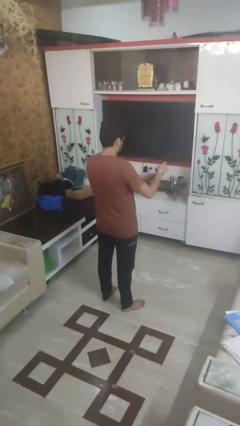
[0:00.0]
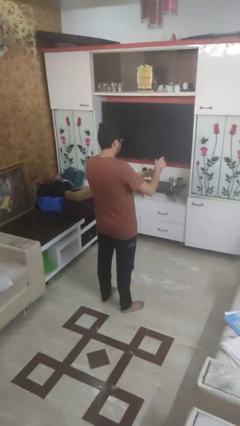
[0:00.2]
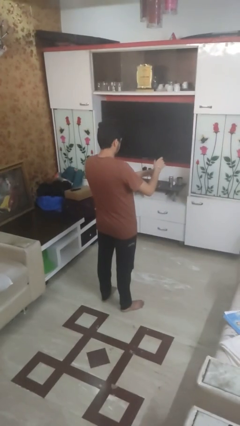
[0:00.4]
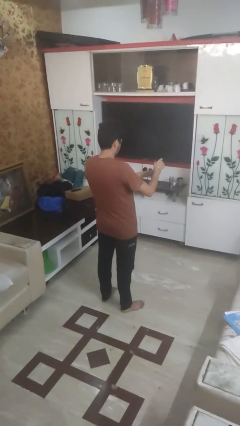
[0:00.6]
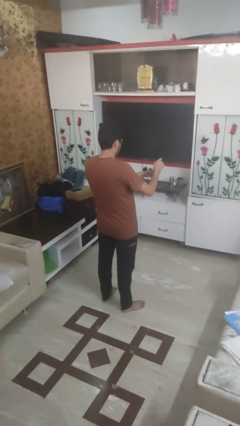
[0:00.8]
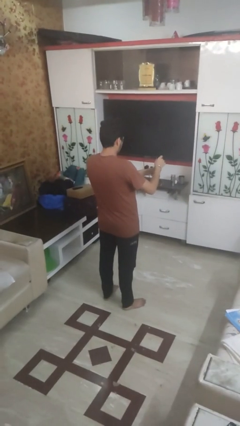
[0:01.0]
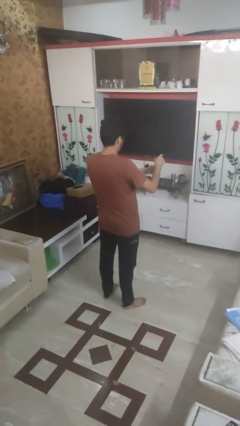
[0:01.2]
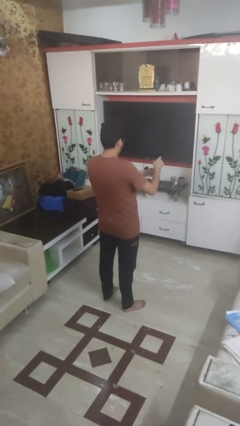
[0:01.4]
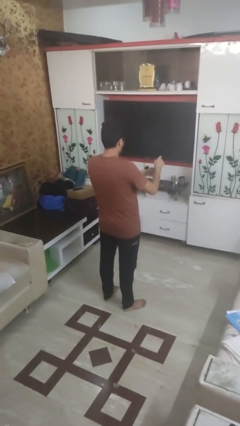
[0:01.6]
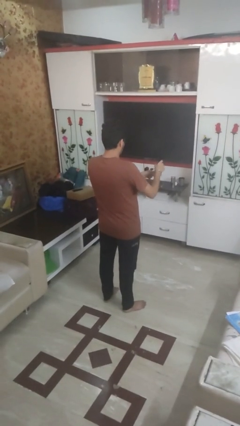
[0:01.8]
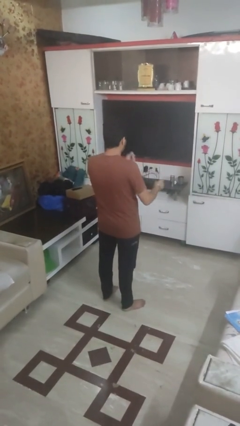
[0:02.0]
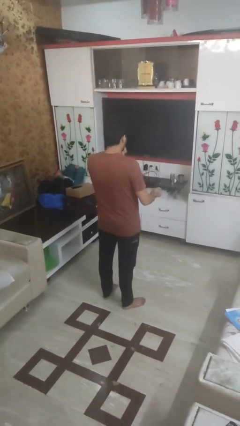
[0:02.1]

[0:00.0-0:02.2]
person clips fingernails

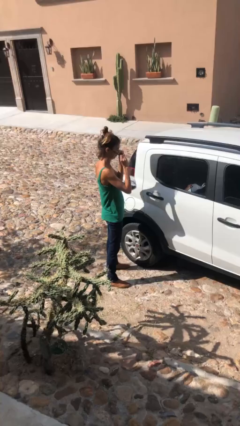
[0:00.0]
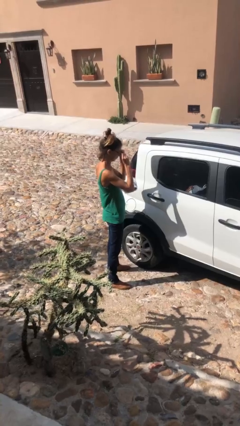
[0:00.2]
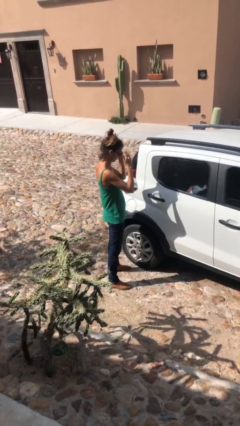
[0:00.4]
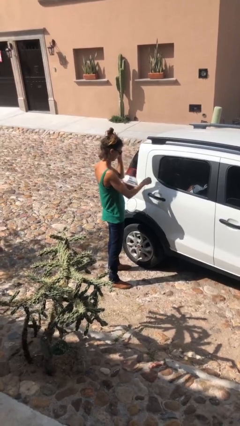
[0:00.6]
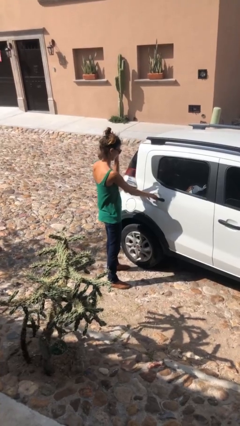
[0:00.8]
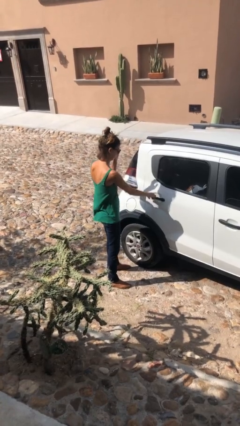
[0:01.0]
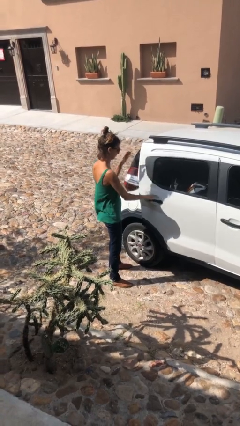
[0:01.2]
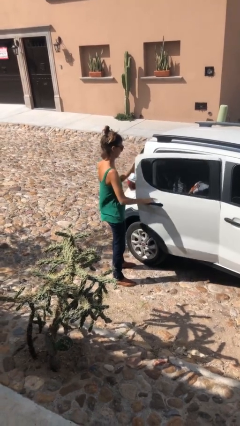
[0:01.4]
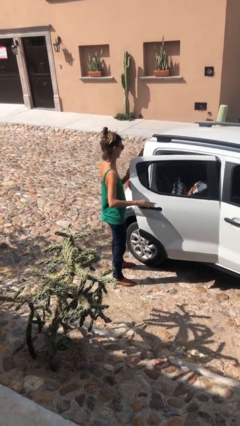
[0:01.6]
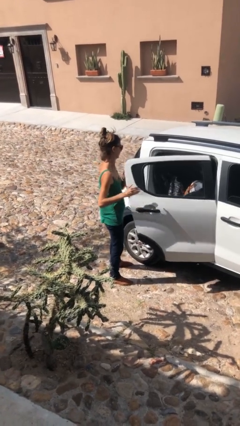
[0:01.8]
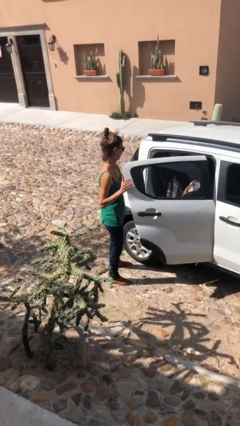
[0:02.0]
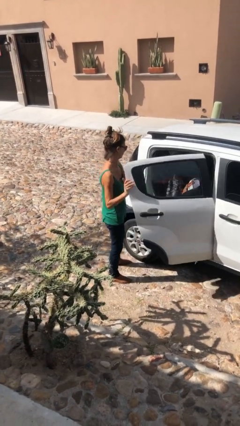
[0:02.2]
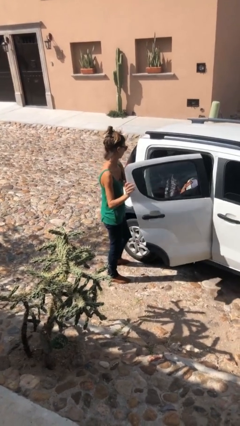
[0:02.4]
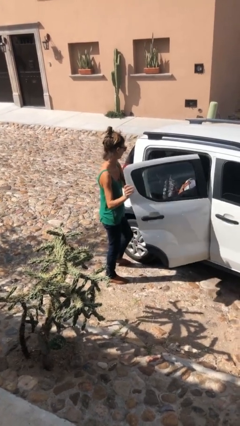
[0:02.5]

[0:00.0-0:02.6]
person opens car door

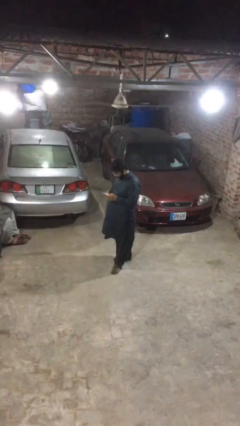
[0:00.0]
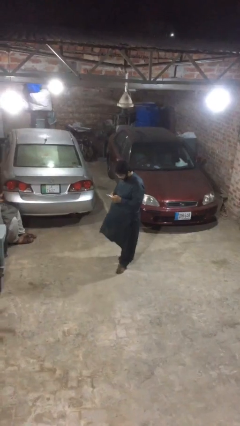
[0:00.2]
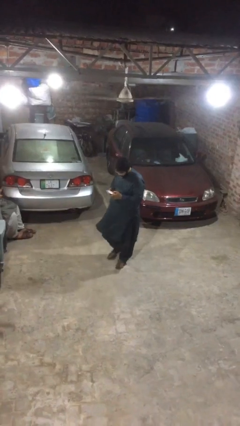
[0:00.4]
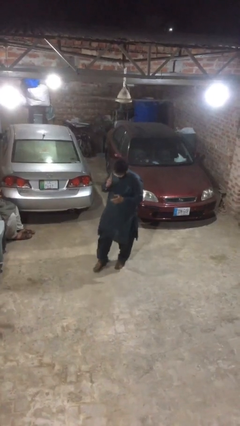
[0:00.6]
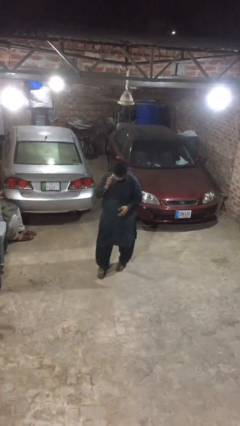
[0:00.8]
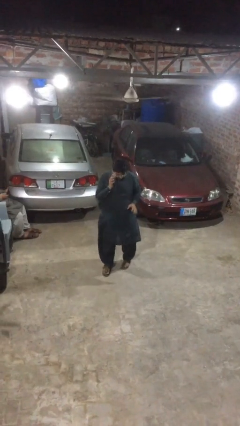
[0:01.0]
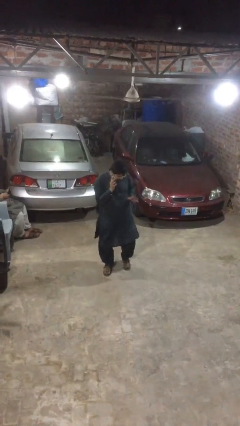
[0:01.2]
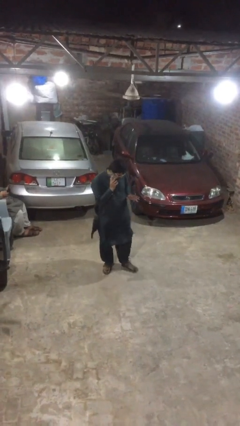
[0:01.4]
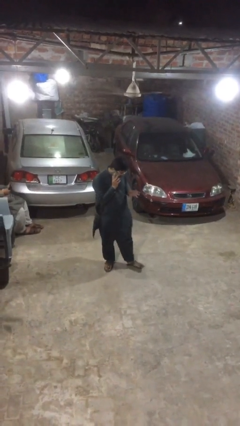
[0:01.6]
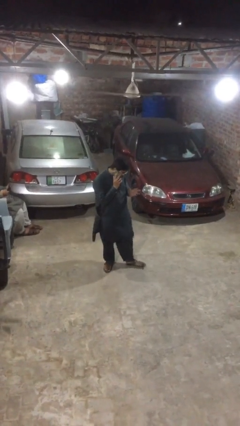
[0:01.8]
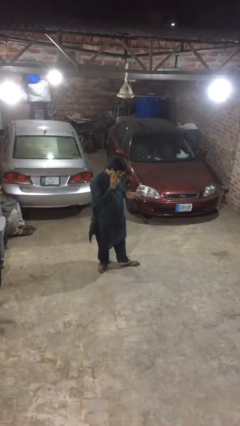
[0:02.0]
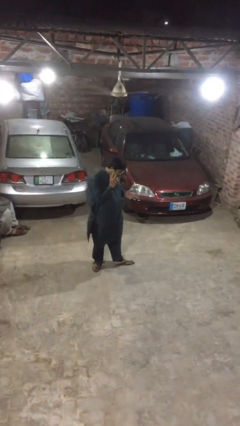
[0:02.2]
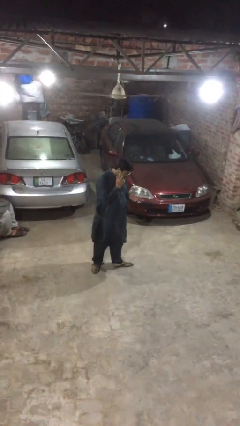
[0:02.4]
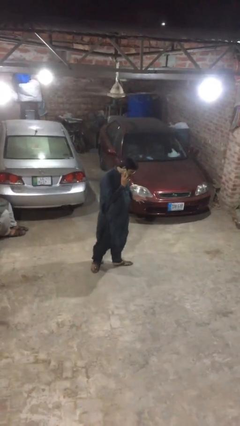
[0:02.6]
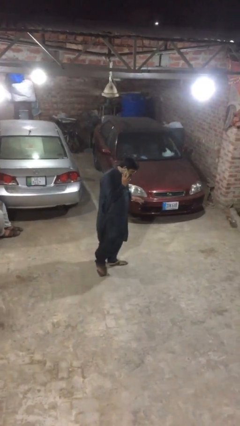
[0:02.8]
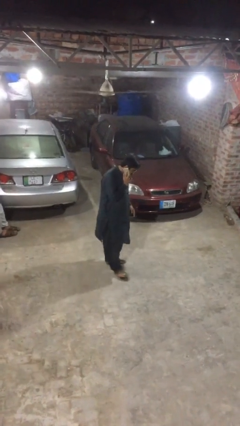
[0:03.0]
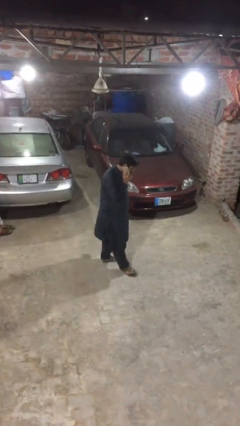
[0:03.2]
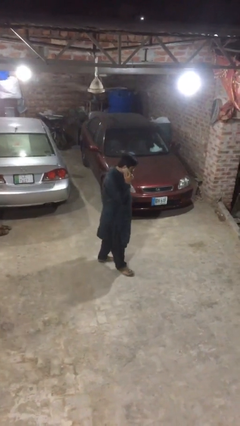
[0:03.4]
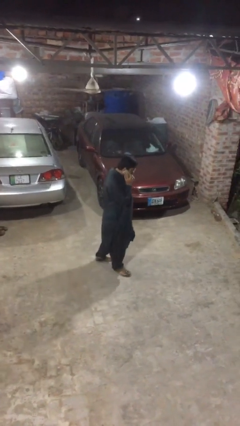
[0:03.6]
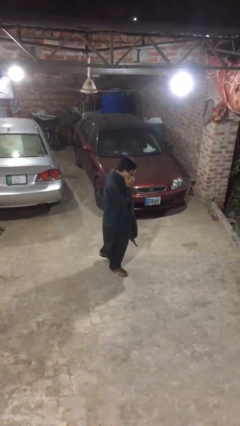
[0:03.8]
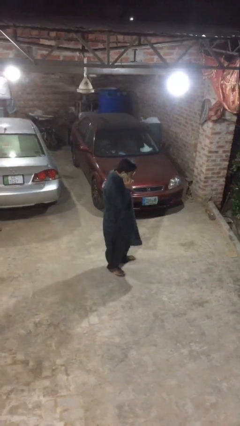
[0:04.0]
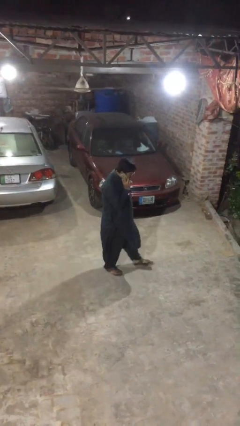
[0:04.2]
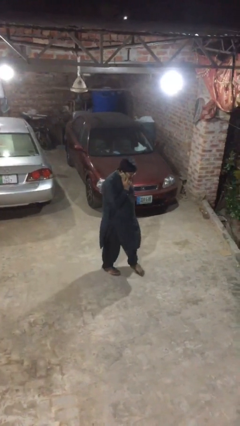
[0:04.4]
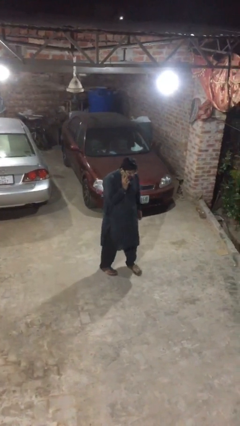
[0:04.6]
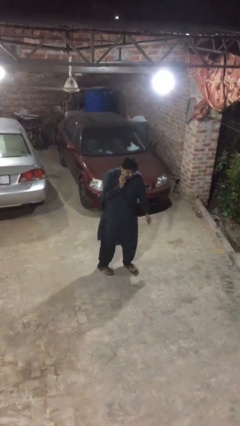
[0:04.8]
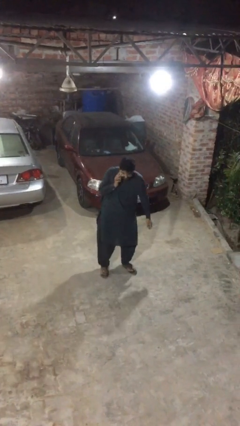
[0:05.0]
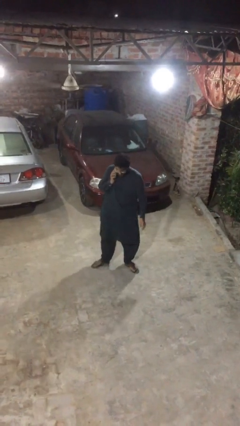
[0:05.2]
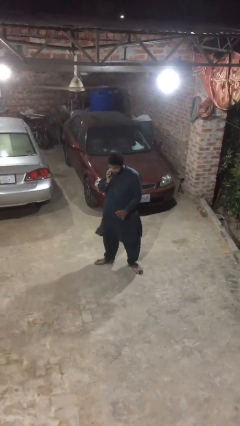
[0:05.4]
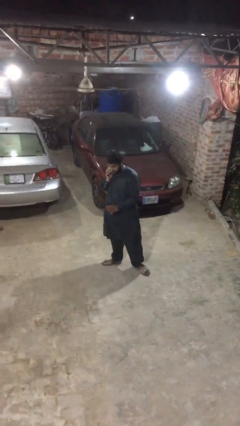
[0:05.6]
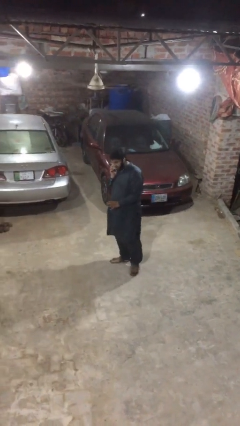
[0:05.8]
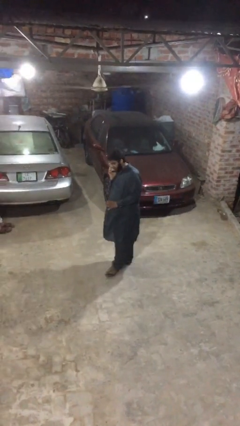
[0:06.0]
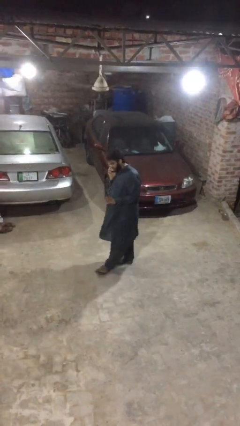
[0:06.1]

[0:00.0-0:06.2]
person talks on phone

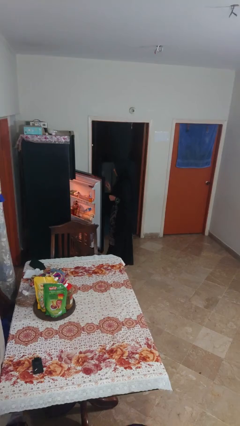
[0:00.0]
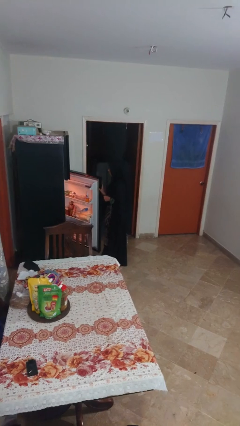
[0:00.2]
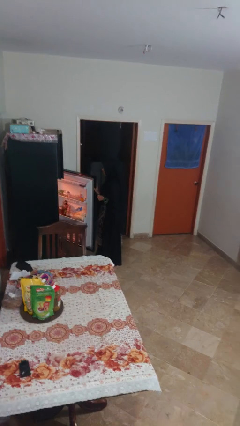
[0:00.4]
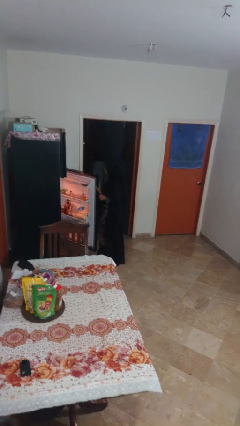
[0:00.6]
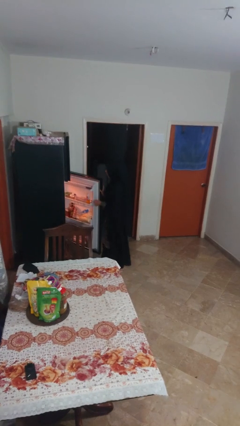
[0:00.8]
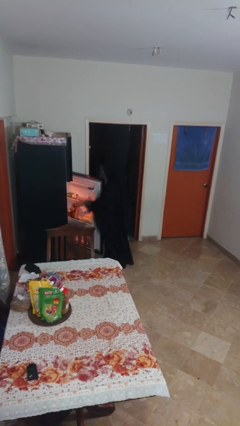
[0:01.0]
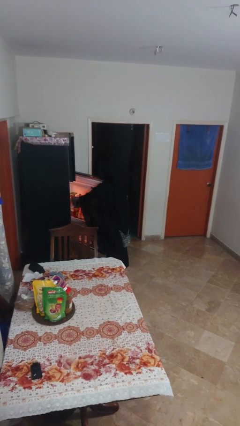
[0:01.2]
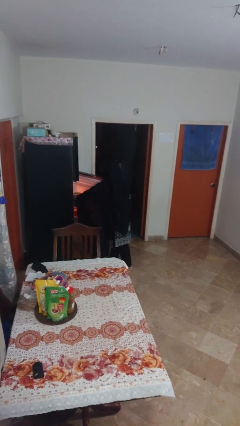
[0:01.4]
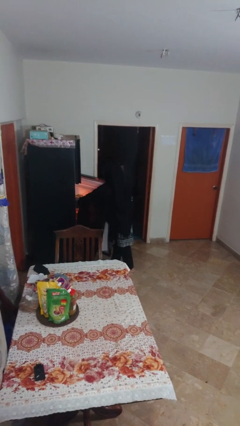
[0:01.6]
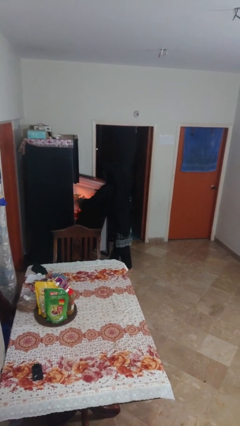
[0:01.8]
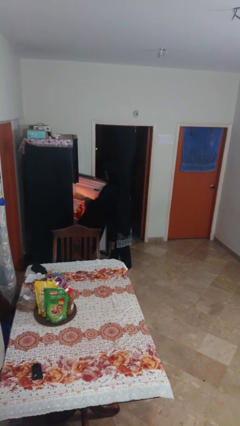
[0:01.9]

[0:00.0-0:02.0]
person takes object from refrigerator

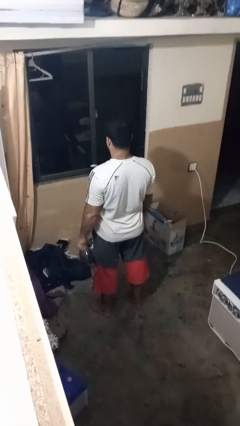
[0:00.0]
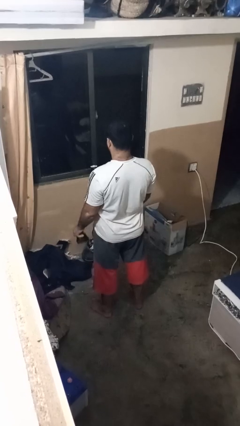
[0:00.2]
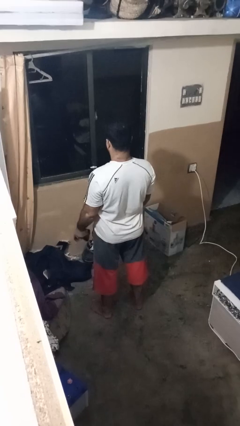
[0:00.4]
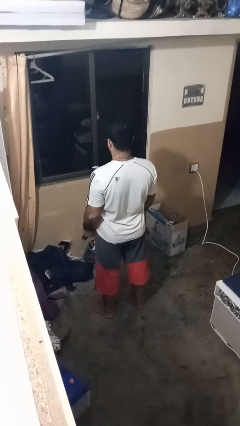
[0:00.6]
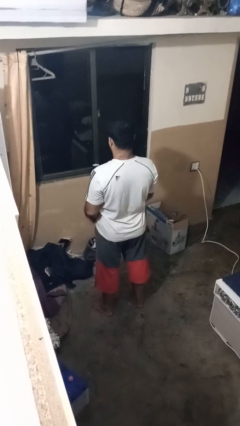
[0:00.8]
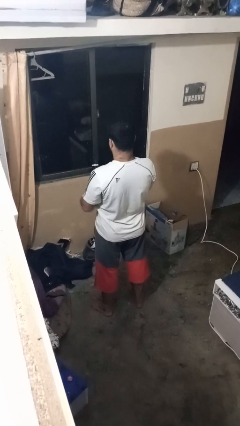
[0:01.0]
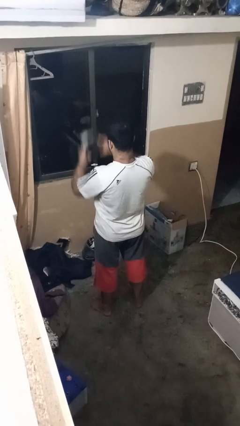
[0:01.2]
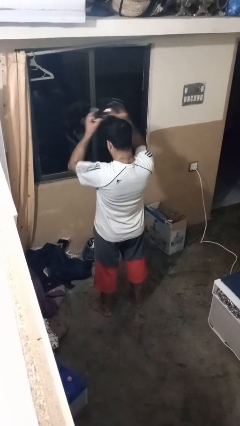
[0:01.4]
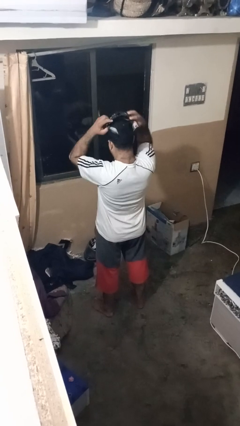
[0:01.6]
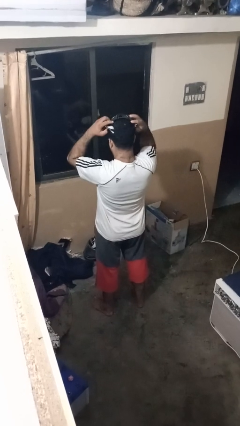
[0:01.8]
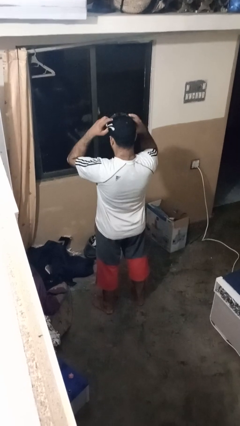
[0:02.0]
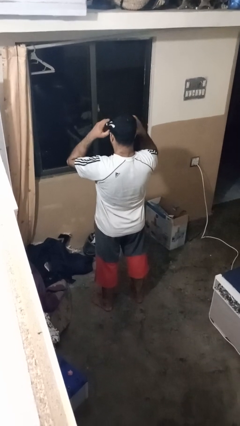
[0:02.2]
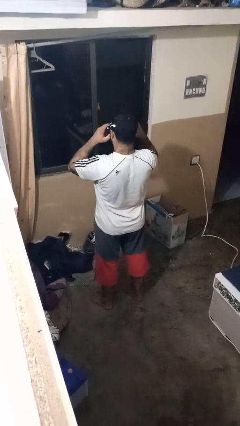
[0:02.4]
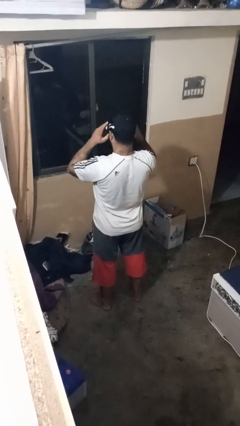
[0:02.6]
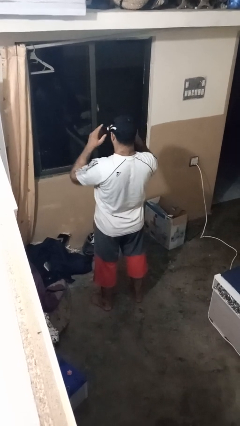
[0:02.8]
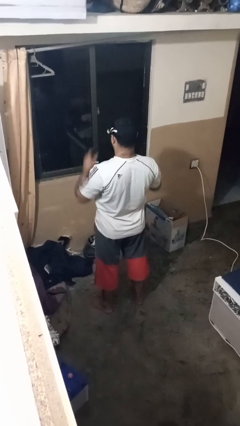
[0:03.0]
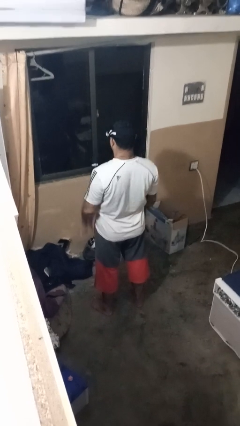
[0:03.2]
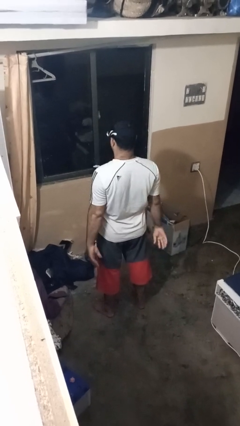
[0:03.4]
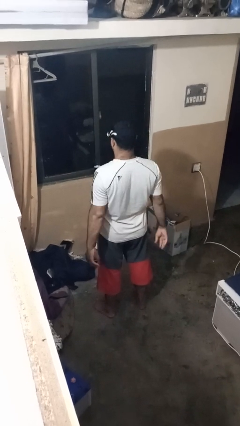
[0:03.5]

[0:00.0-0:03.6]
person puts on sunglasses

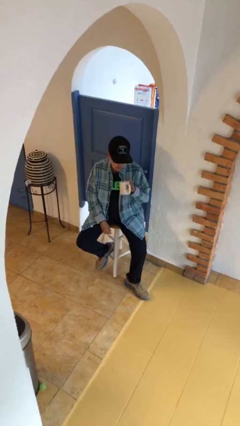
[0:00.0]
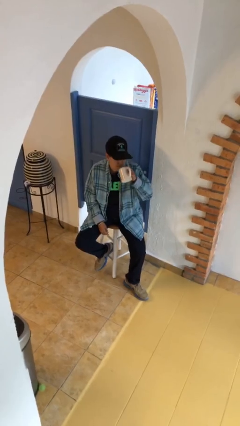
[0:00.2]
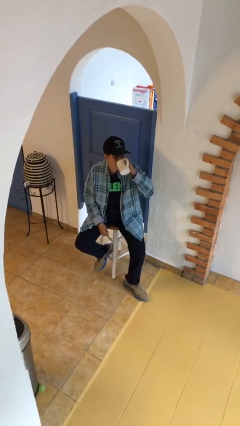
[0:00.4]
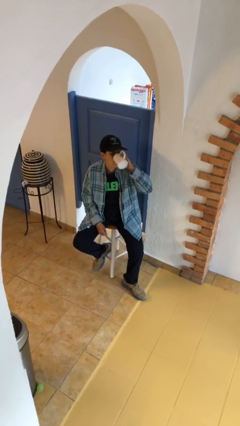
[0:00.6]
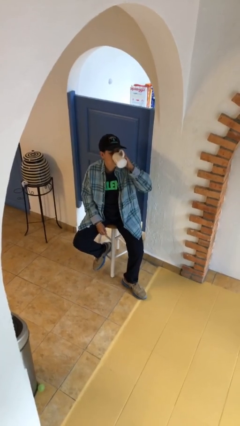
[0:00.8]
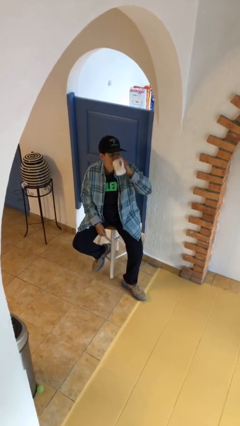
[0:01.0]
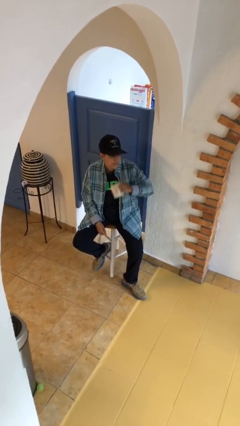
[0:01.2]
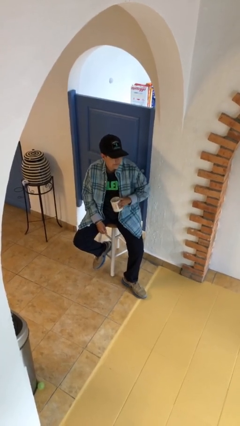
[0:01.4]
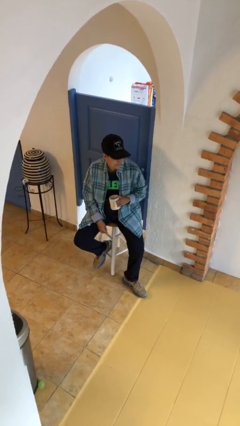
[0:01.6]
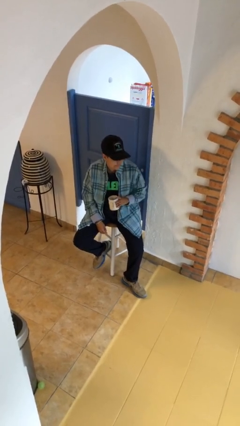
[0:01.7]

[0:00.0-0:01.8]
person drinks from mug
